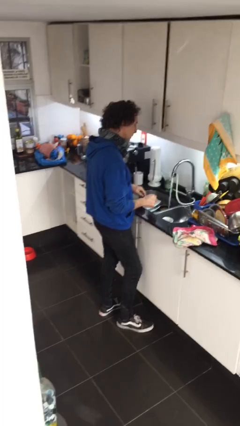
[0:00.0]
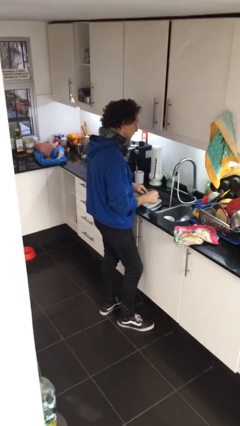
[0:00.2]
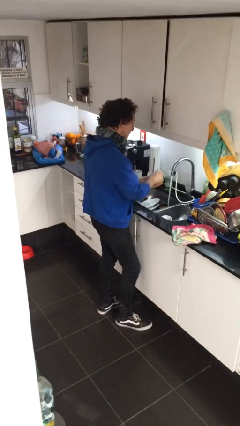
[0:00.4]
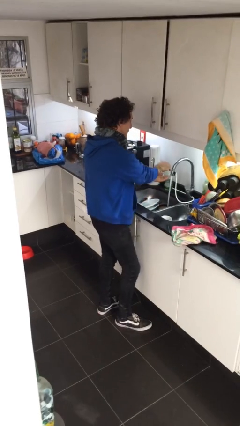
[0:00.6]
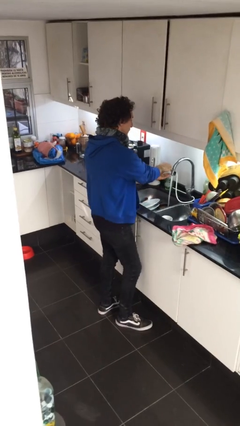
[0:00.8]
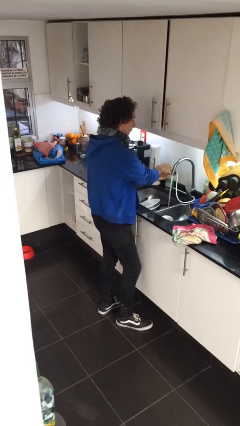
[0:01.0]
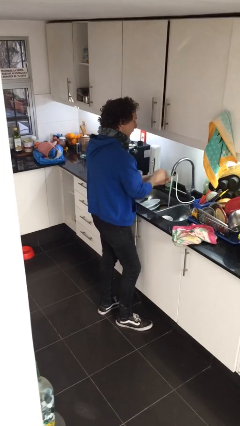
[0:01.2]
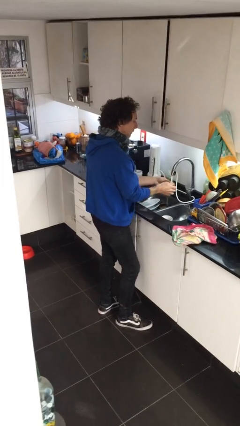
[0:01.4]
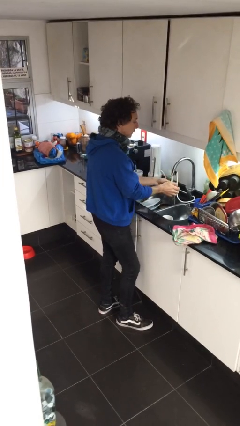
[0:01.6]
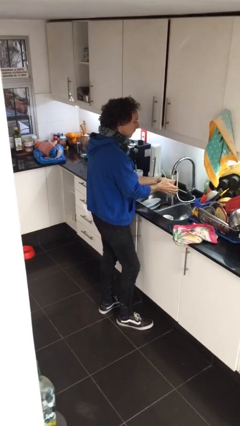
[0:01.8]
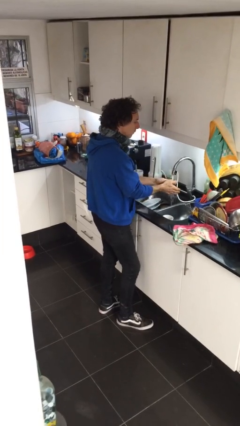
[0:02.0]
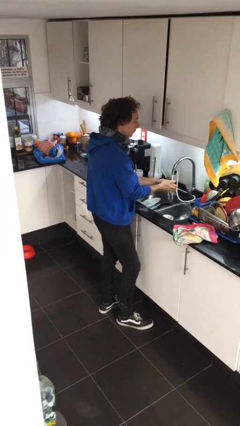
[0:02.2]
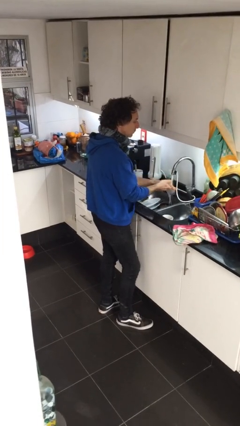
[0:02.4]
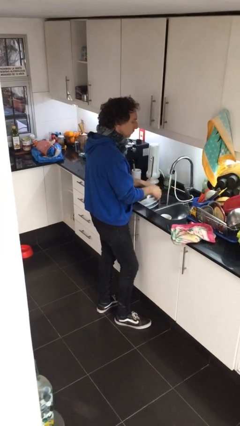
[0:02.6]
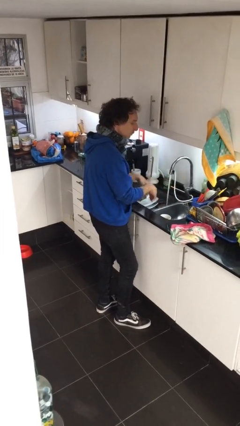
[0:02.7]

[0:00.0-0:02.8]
person washes hands

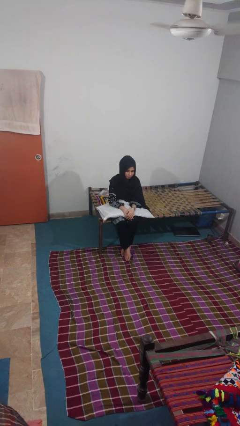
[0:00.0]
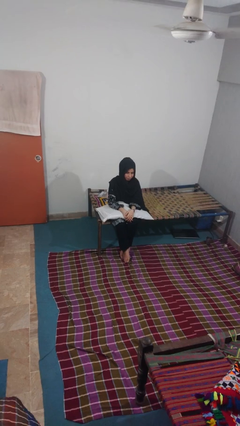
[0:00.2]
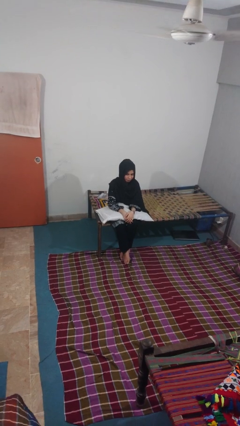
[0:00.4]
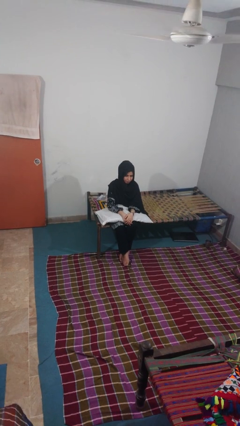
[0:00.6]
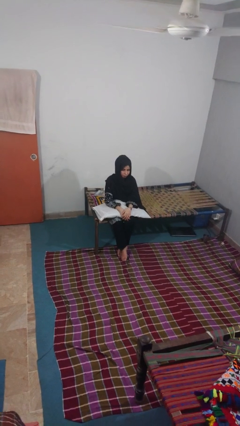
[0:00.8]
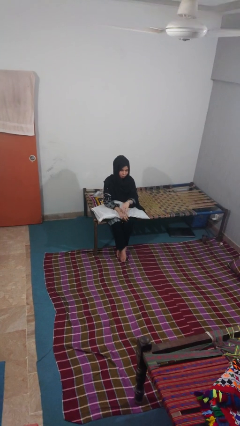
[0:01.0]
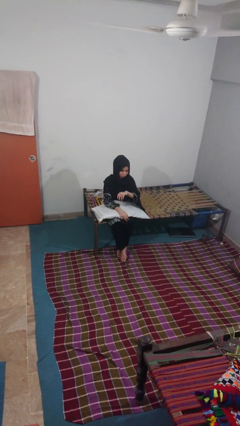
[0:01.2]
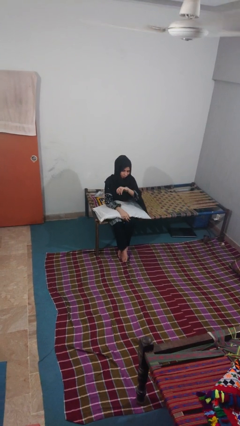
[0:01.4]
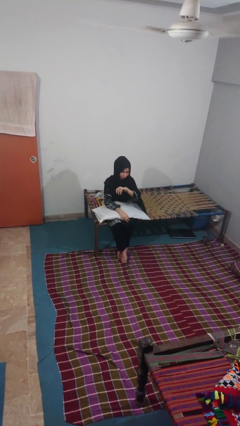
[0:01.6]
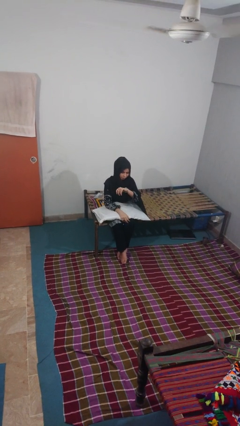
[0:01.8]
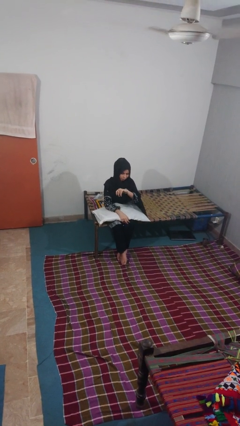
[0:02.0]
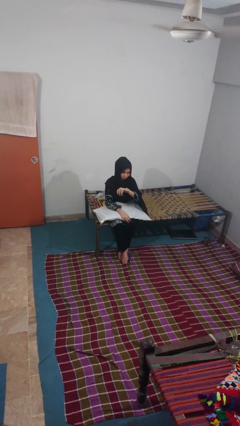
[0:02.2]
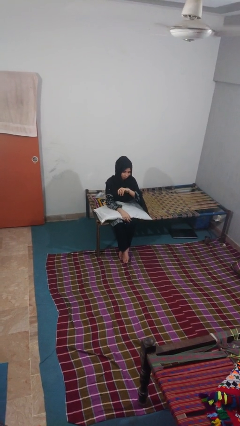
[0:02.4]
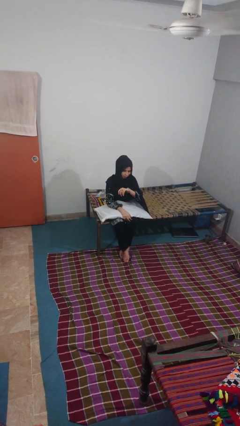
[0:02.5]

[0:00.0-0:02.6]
person looks at wristwatch

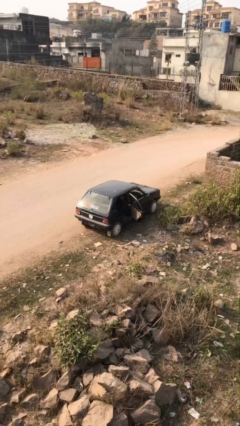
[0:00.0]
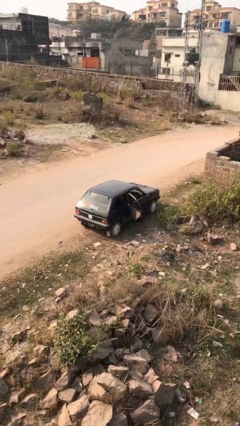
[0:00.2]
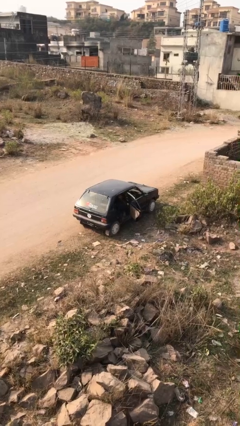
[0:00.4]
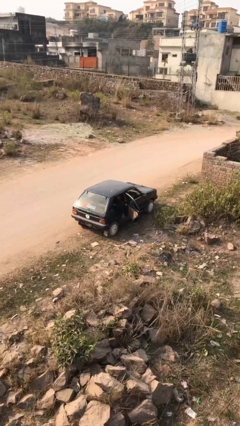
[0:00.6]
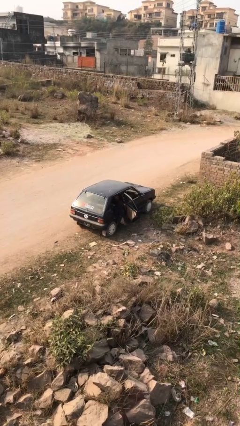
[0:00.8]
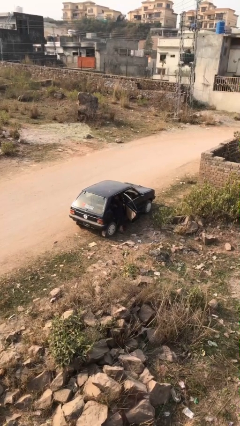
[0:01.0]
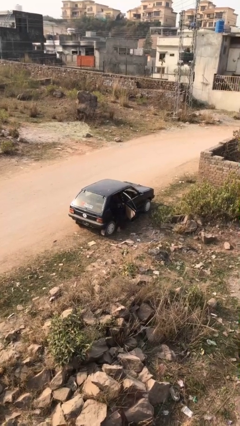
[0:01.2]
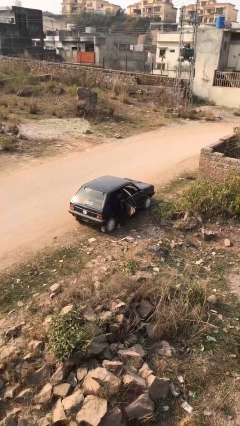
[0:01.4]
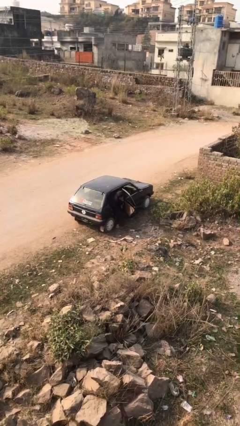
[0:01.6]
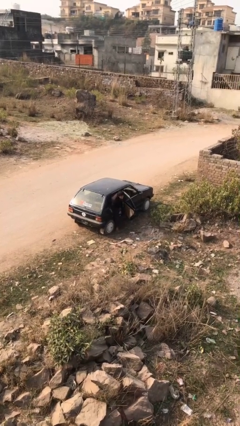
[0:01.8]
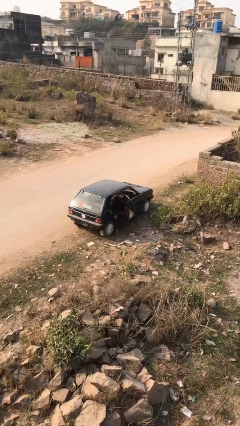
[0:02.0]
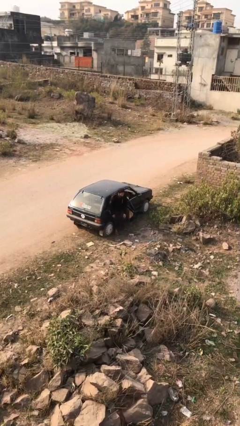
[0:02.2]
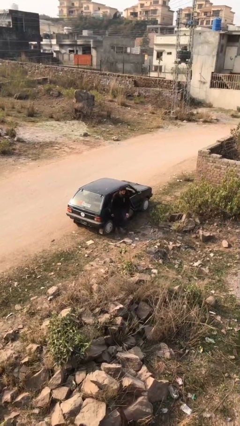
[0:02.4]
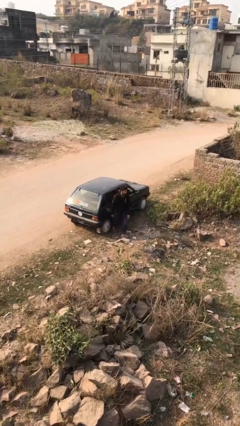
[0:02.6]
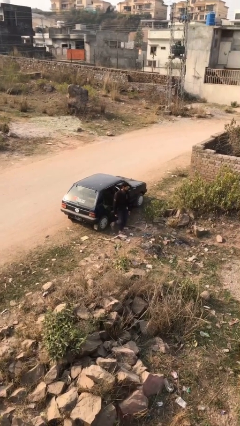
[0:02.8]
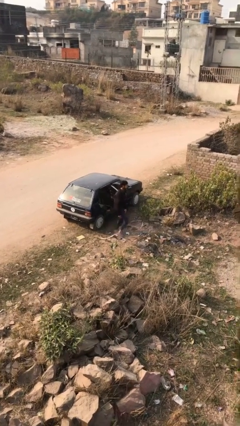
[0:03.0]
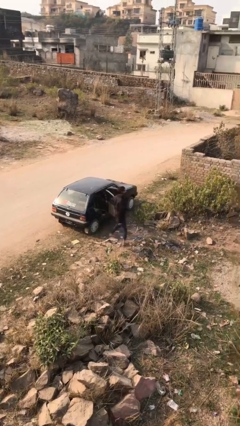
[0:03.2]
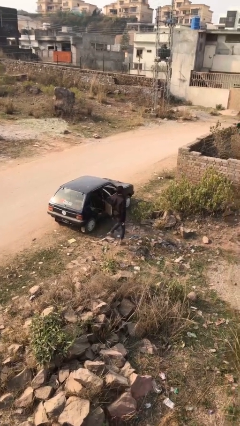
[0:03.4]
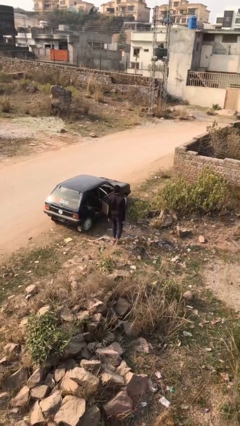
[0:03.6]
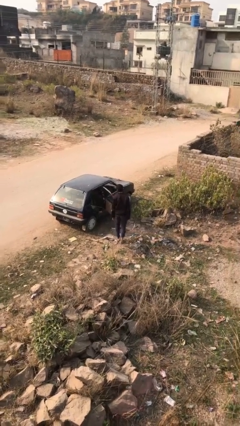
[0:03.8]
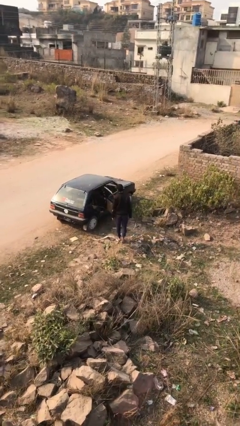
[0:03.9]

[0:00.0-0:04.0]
person exits car

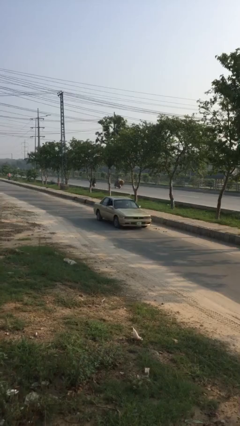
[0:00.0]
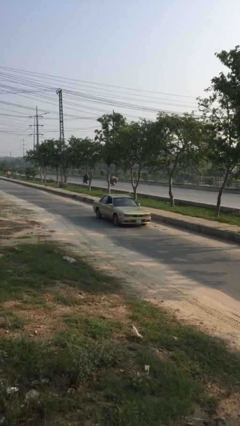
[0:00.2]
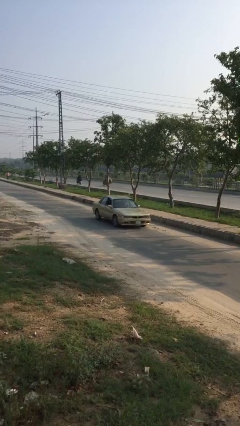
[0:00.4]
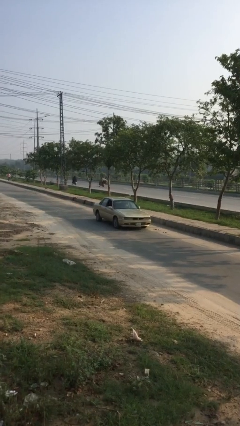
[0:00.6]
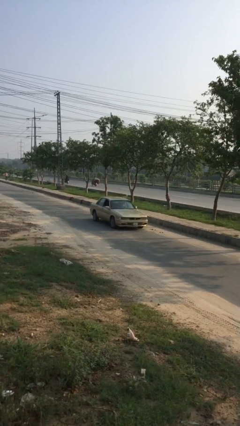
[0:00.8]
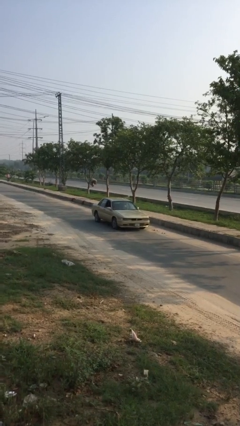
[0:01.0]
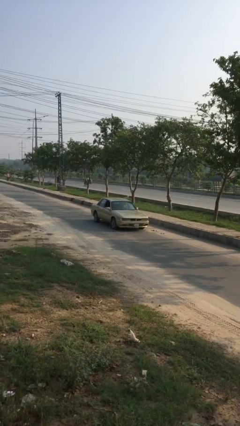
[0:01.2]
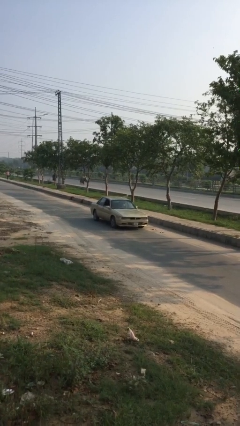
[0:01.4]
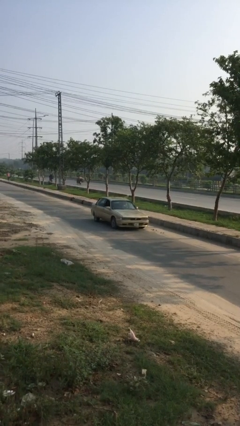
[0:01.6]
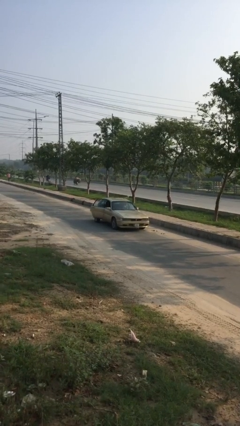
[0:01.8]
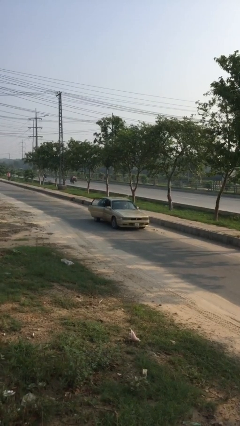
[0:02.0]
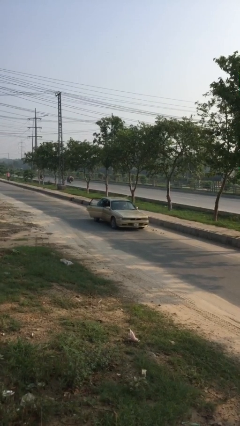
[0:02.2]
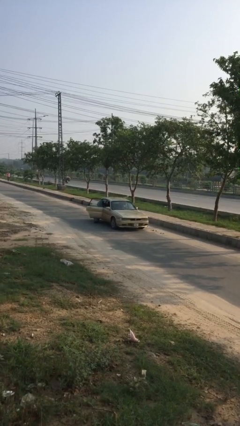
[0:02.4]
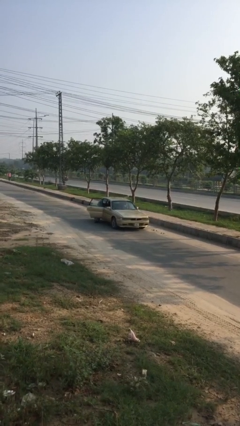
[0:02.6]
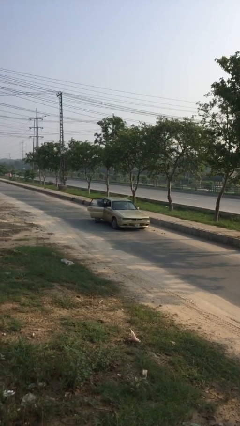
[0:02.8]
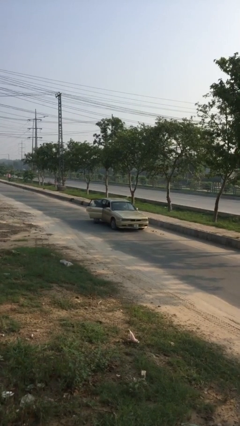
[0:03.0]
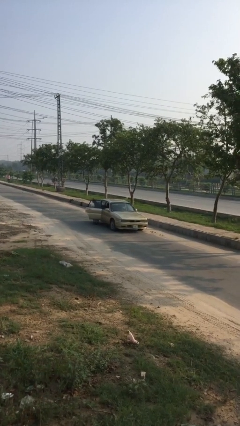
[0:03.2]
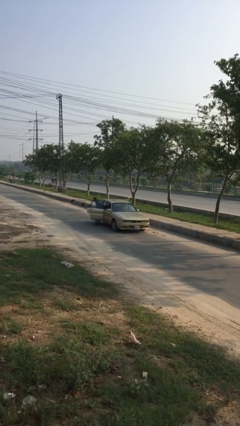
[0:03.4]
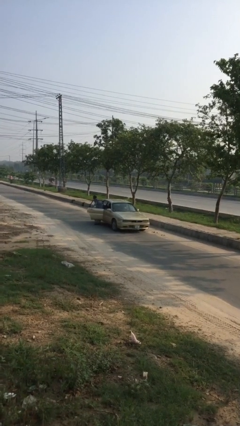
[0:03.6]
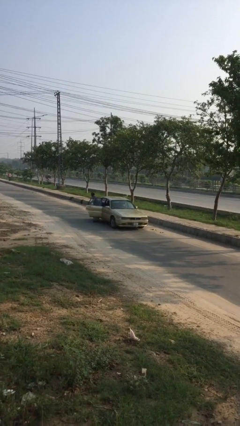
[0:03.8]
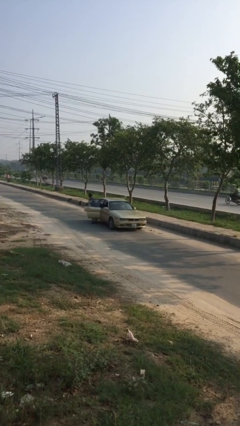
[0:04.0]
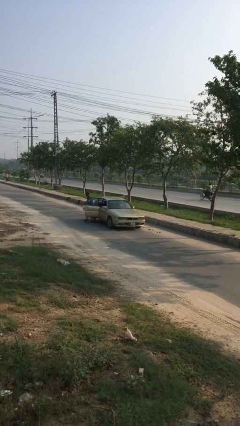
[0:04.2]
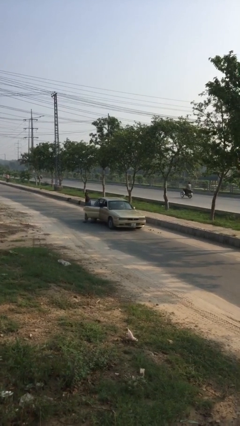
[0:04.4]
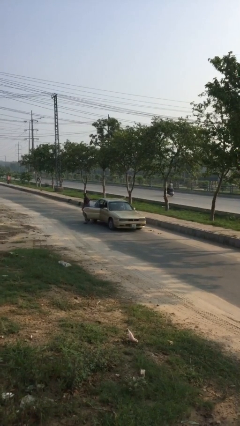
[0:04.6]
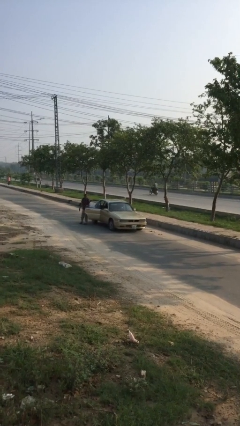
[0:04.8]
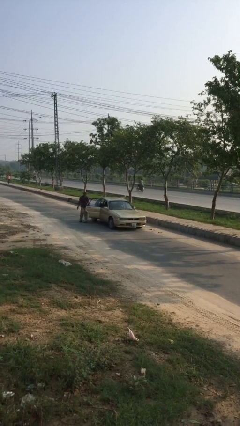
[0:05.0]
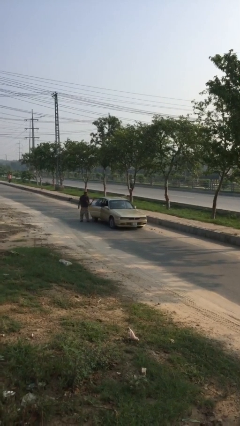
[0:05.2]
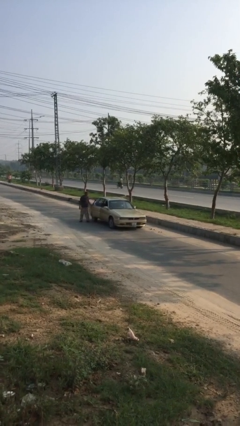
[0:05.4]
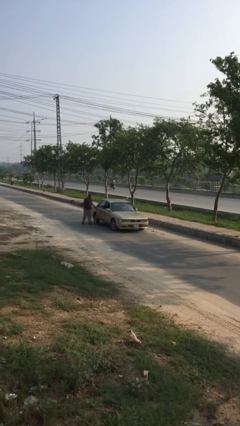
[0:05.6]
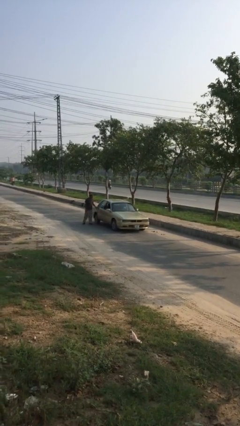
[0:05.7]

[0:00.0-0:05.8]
car drops off person

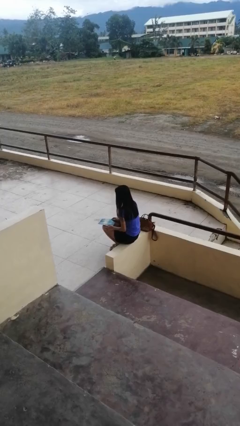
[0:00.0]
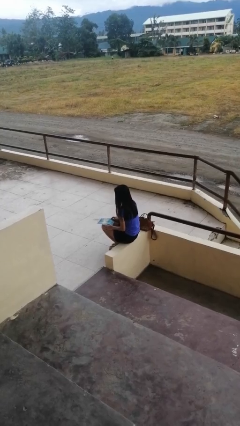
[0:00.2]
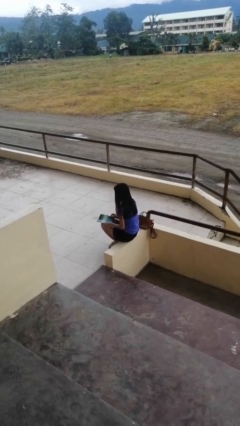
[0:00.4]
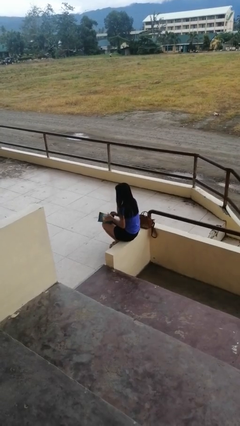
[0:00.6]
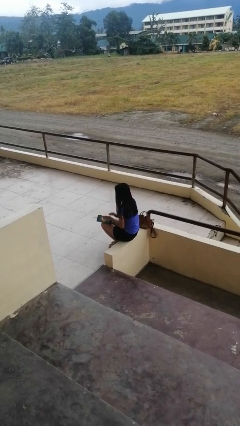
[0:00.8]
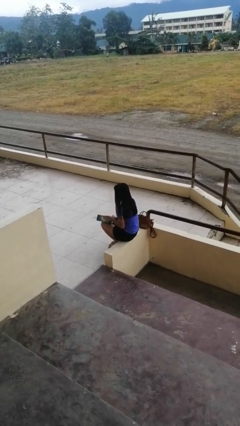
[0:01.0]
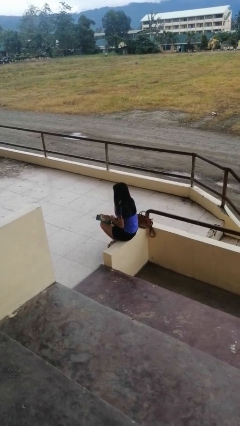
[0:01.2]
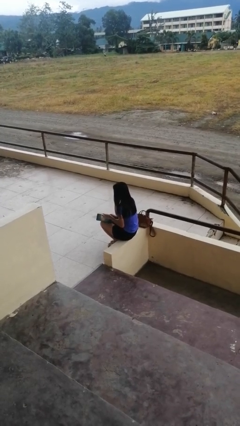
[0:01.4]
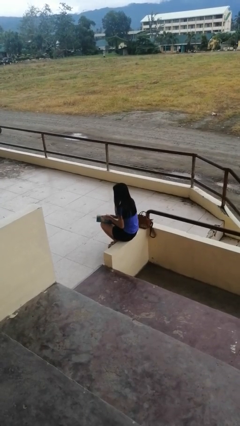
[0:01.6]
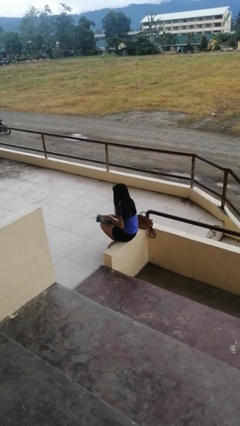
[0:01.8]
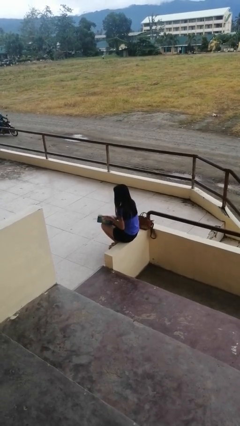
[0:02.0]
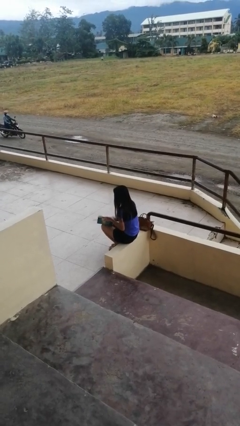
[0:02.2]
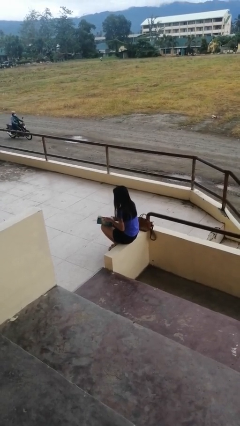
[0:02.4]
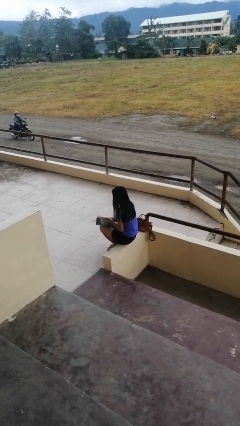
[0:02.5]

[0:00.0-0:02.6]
person reads magazine
